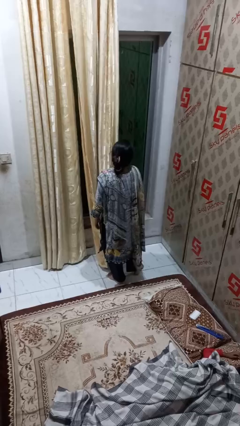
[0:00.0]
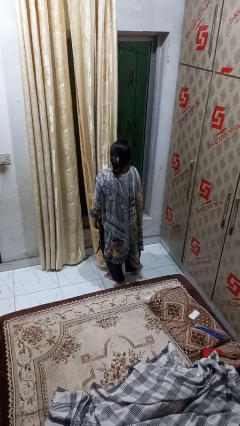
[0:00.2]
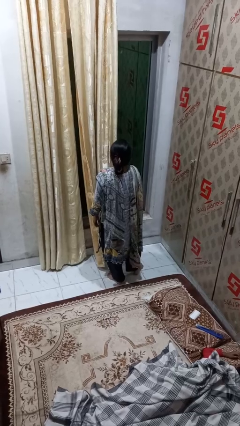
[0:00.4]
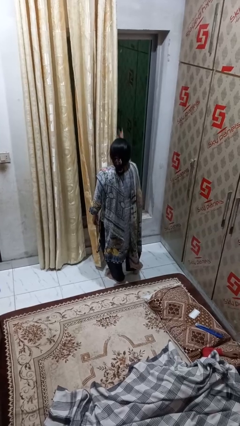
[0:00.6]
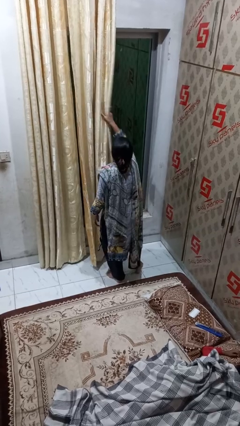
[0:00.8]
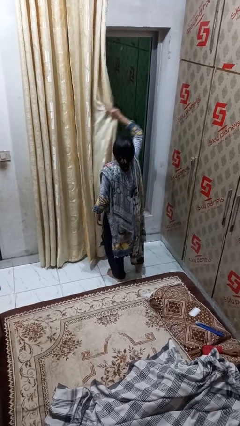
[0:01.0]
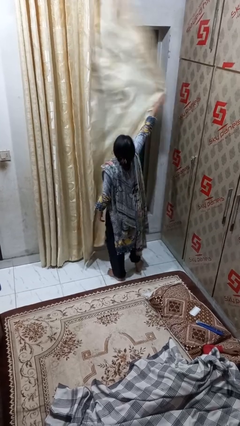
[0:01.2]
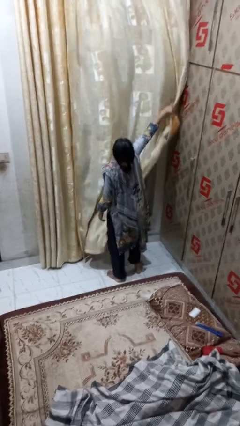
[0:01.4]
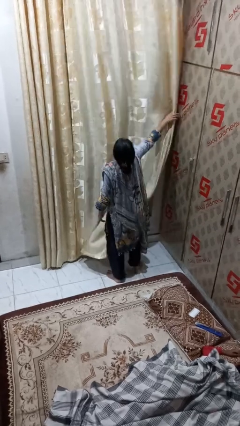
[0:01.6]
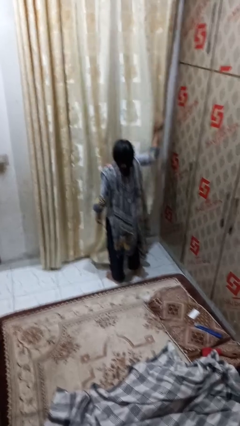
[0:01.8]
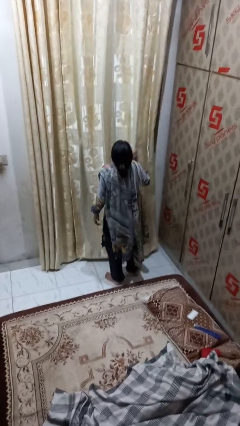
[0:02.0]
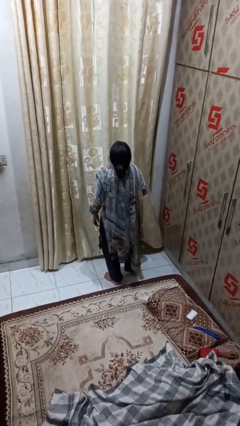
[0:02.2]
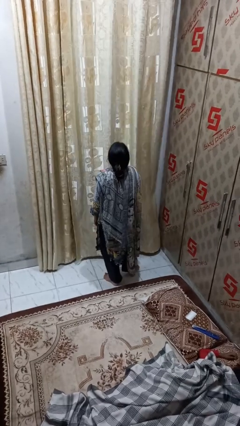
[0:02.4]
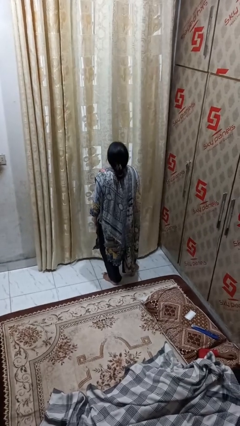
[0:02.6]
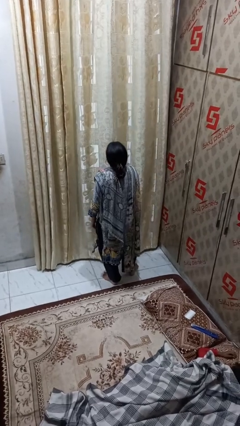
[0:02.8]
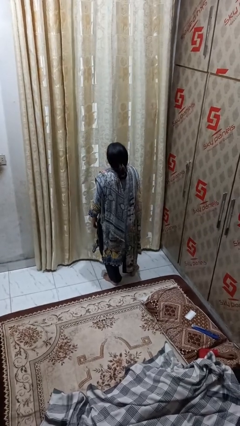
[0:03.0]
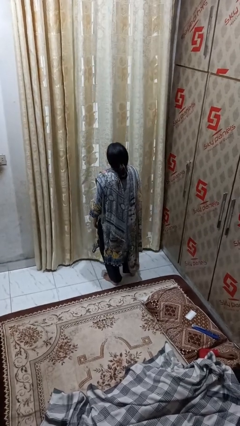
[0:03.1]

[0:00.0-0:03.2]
person closes curtains

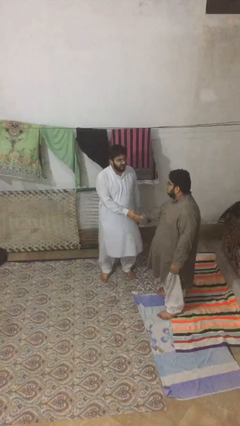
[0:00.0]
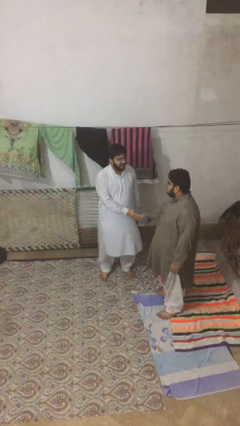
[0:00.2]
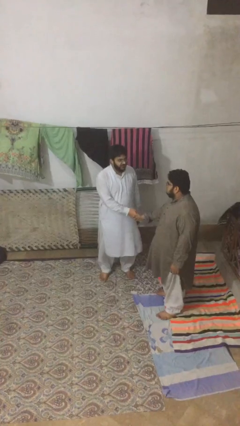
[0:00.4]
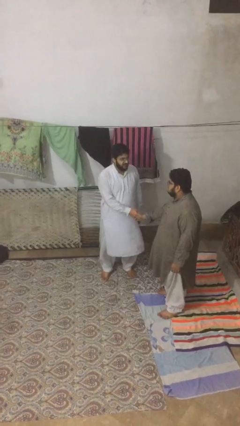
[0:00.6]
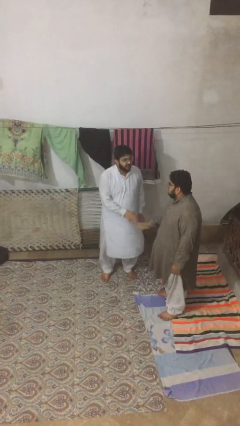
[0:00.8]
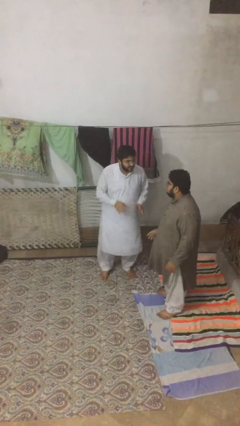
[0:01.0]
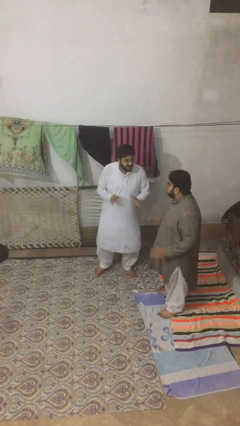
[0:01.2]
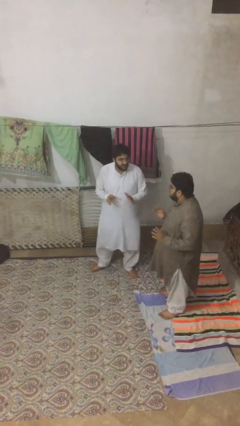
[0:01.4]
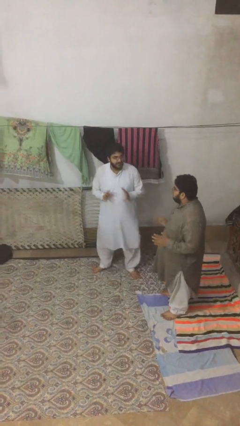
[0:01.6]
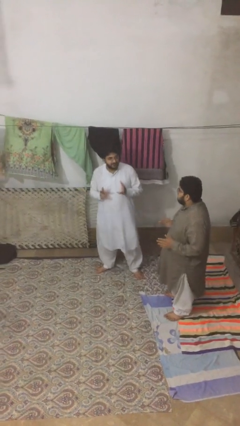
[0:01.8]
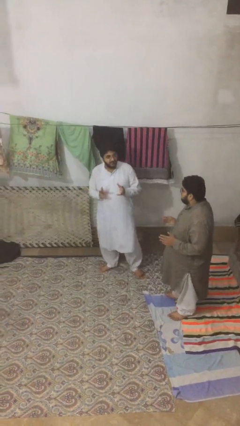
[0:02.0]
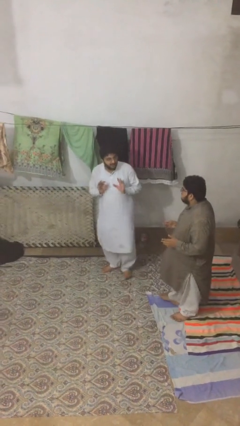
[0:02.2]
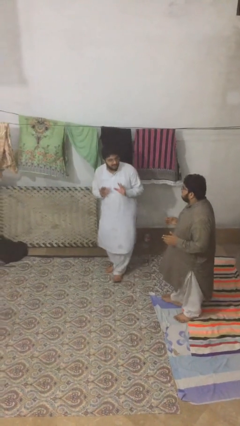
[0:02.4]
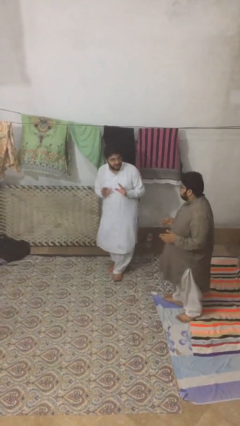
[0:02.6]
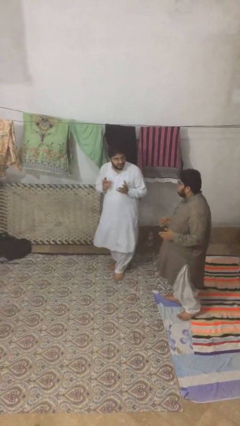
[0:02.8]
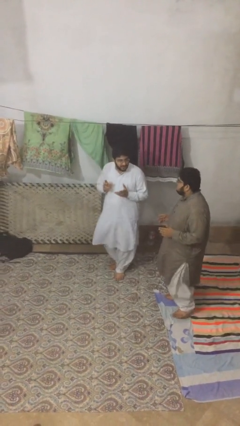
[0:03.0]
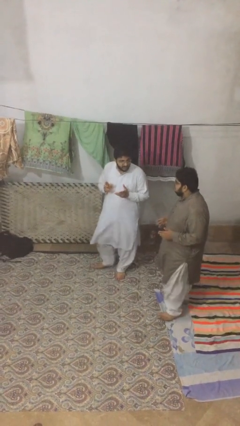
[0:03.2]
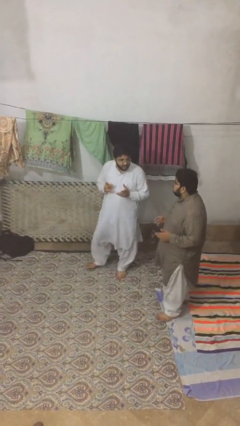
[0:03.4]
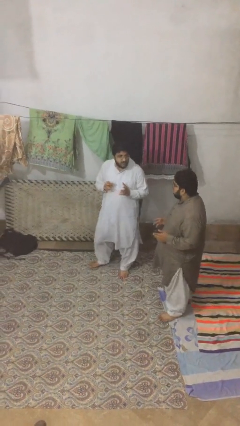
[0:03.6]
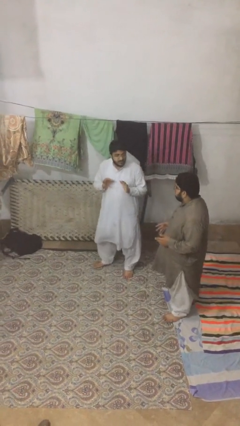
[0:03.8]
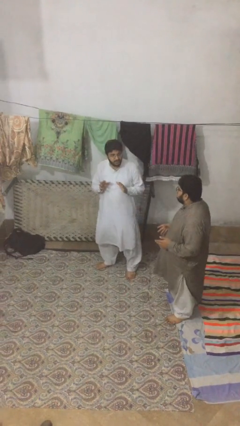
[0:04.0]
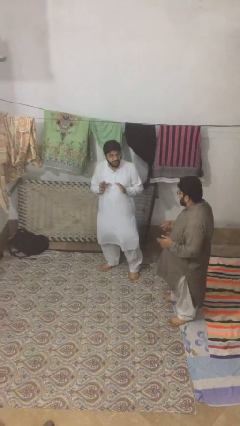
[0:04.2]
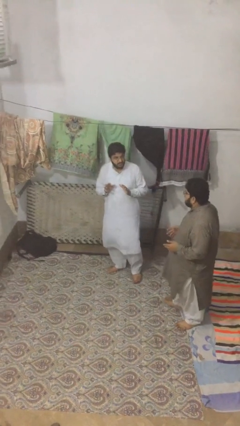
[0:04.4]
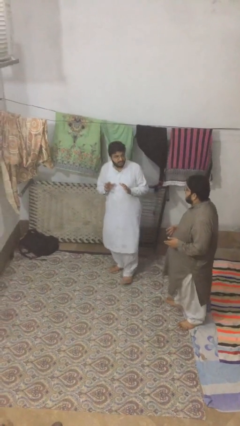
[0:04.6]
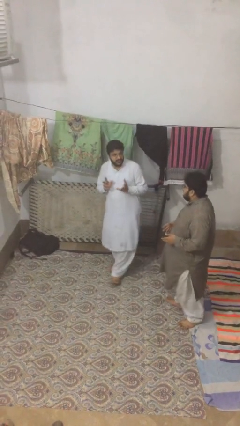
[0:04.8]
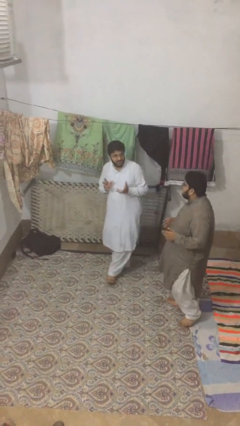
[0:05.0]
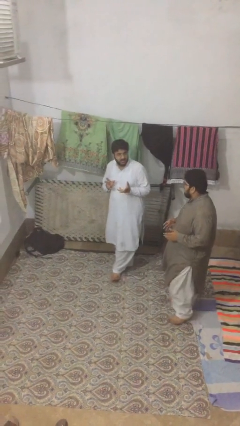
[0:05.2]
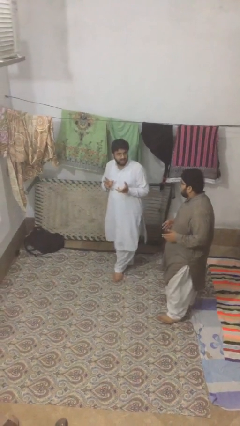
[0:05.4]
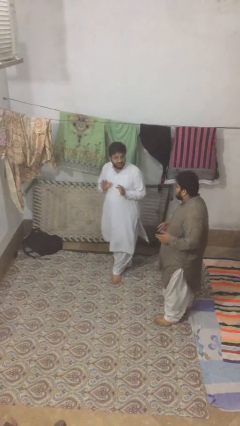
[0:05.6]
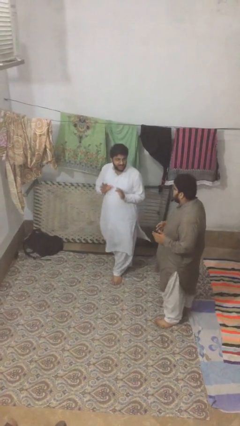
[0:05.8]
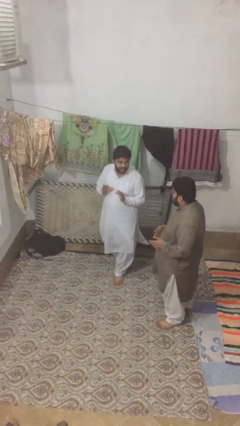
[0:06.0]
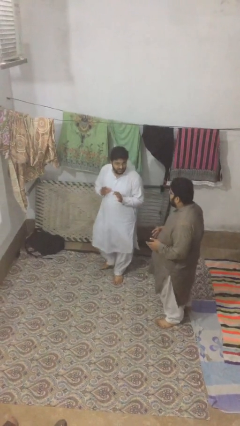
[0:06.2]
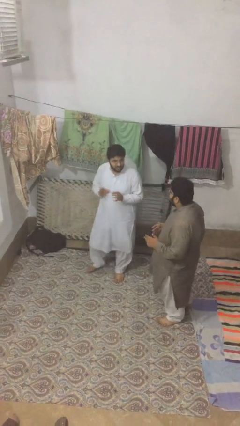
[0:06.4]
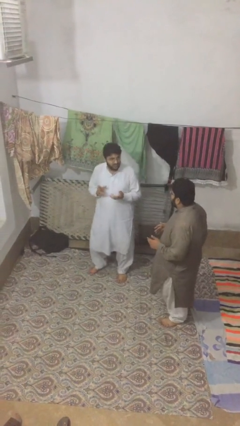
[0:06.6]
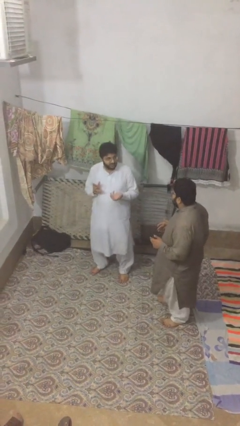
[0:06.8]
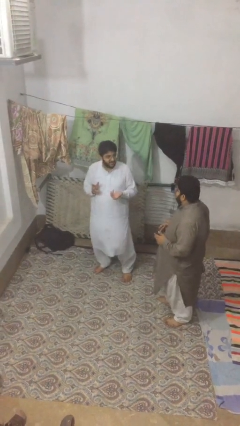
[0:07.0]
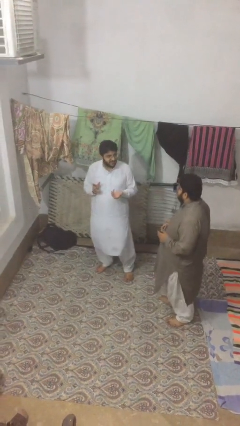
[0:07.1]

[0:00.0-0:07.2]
person talks to person

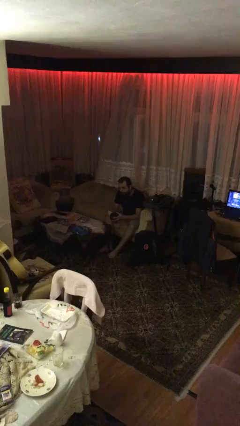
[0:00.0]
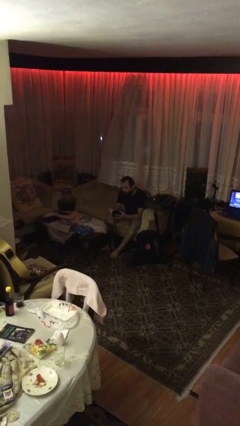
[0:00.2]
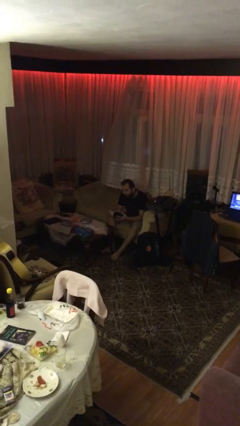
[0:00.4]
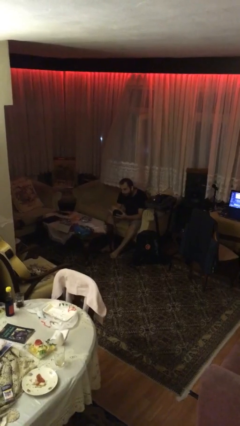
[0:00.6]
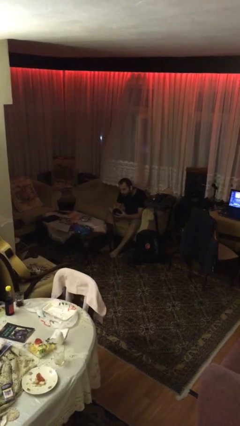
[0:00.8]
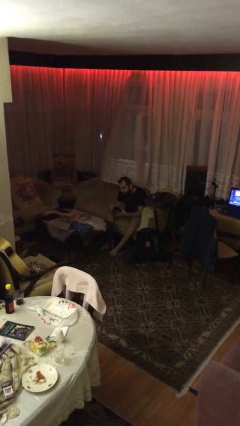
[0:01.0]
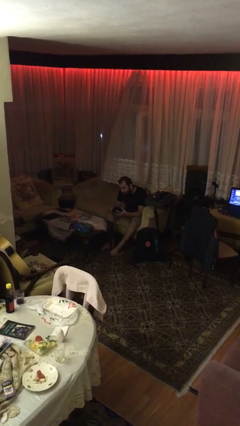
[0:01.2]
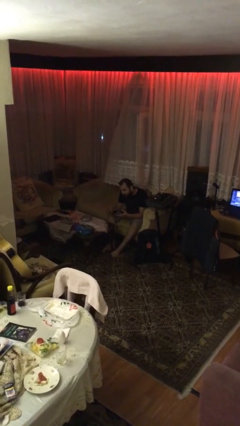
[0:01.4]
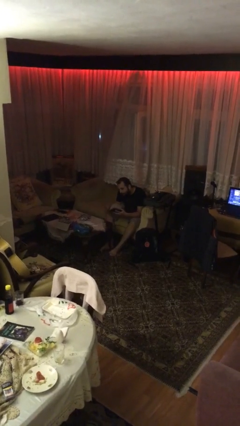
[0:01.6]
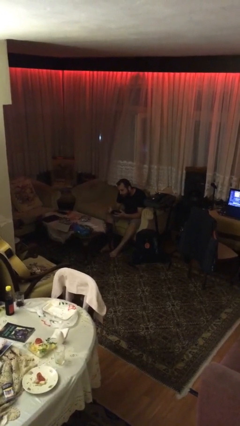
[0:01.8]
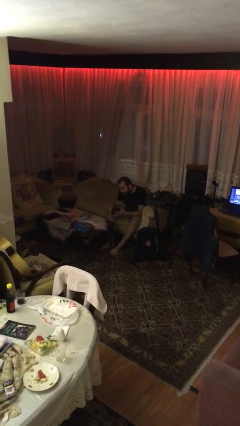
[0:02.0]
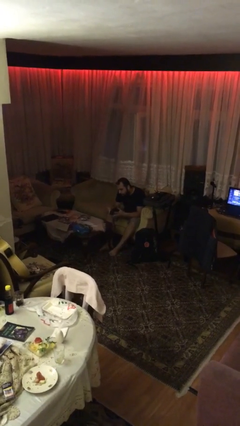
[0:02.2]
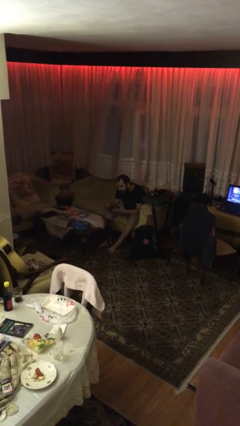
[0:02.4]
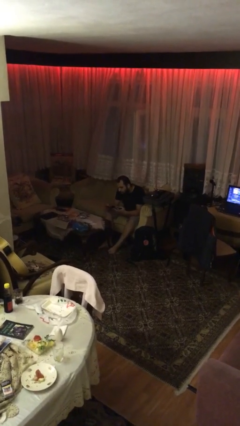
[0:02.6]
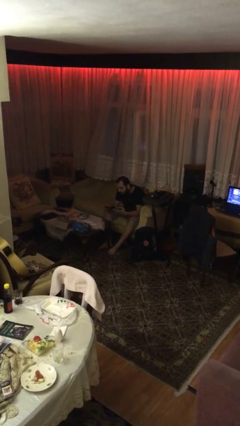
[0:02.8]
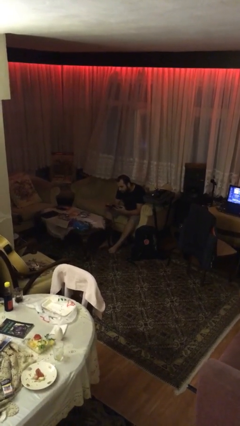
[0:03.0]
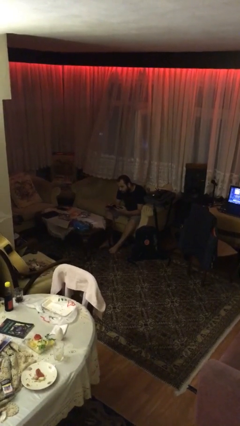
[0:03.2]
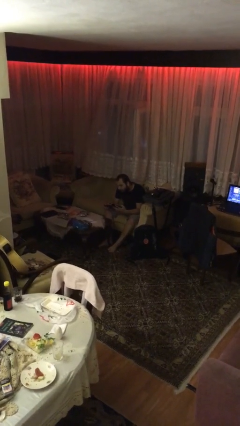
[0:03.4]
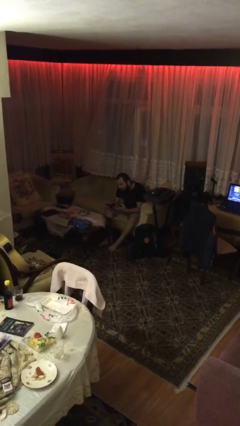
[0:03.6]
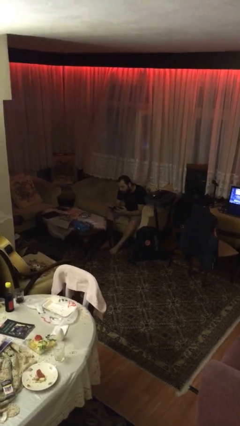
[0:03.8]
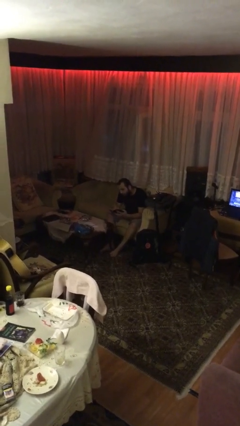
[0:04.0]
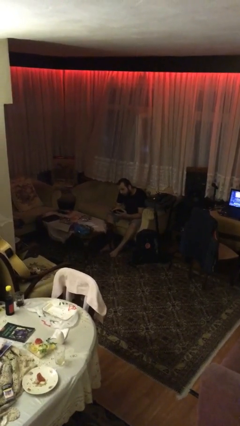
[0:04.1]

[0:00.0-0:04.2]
person reads document

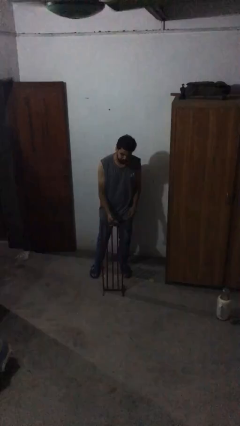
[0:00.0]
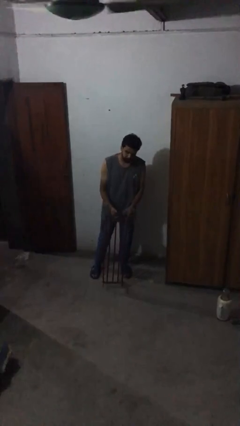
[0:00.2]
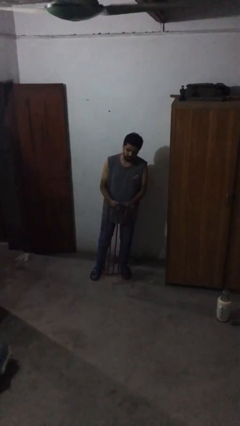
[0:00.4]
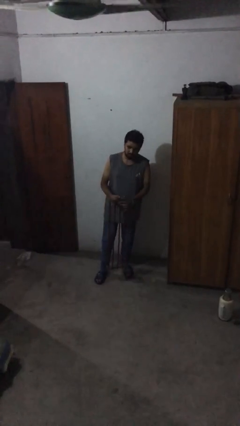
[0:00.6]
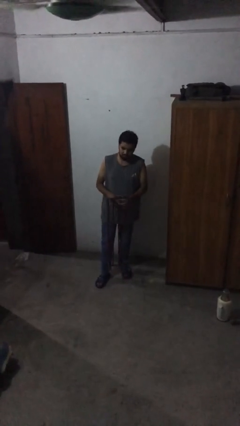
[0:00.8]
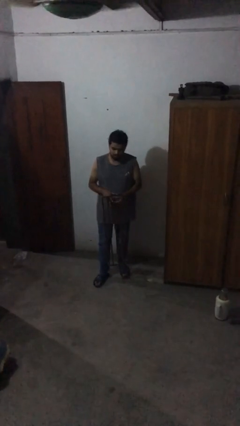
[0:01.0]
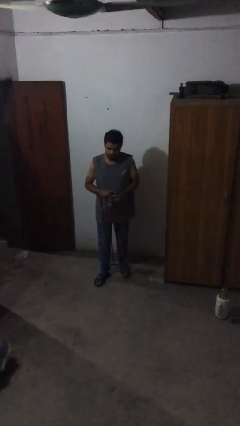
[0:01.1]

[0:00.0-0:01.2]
person picks up object from floor

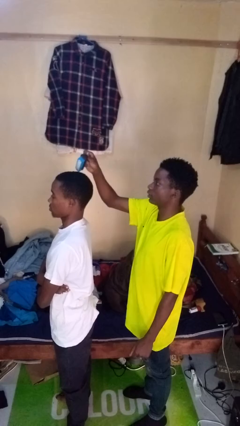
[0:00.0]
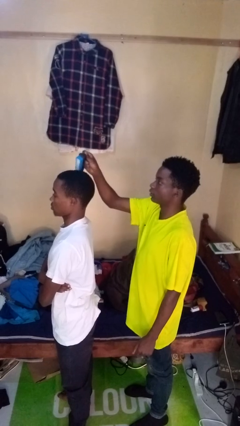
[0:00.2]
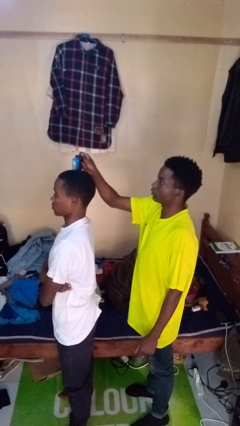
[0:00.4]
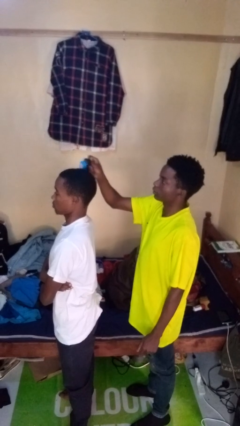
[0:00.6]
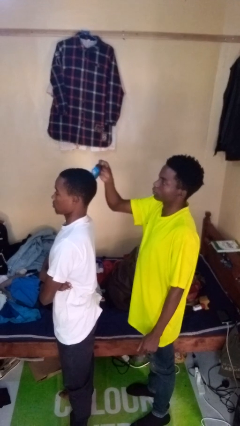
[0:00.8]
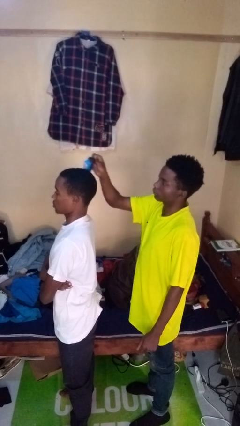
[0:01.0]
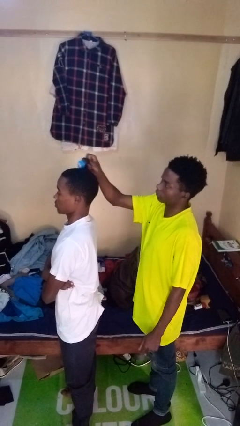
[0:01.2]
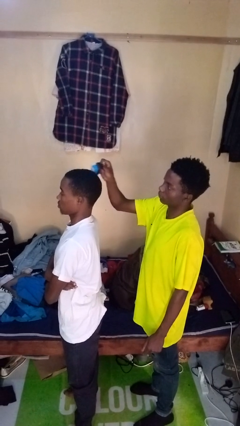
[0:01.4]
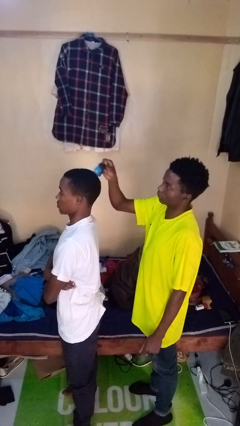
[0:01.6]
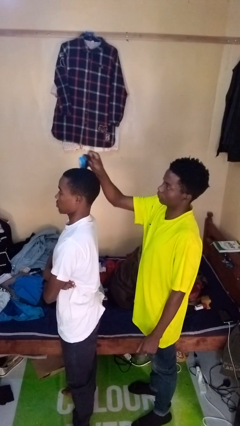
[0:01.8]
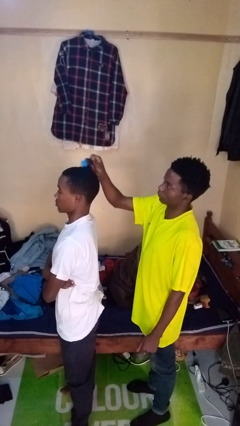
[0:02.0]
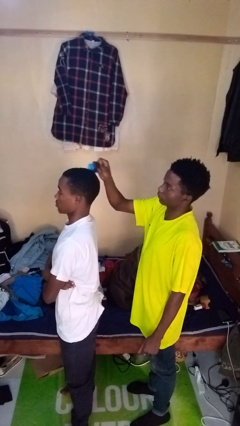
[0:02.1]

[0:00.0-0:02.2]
person brushes hair of person
